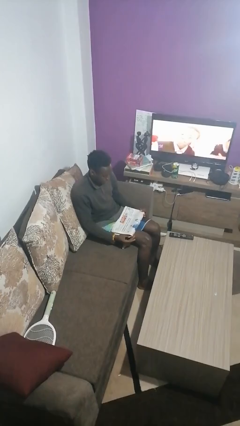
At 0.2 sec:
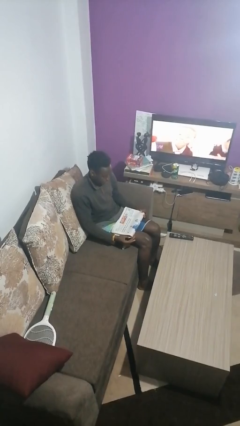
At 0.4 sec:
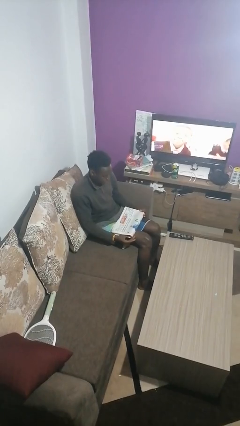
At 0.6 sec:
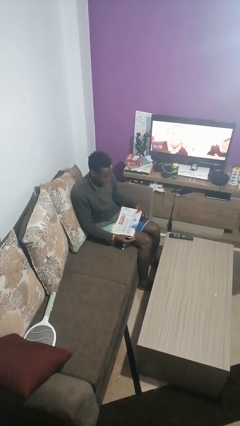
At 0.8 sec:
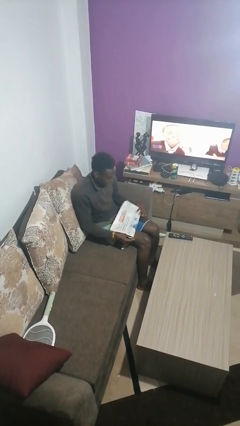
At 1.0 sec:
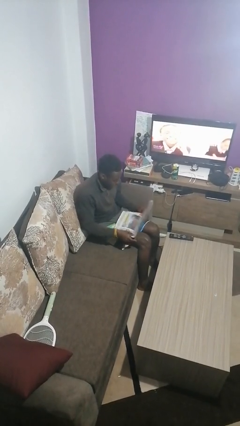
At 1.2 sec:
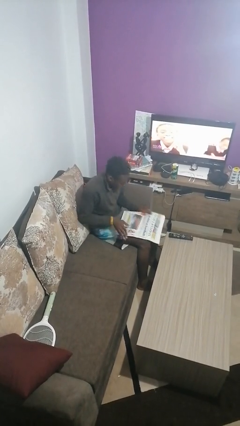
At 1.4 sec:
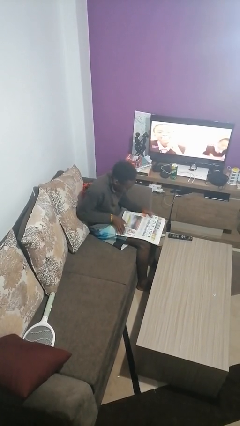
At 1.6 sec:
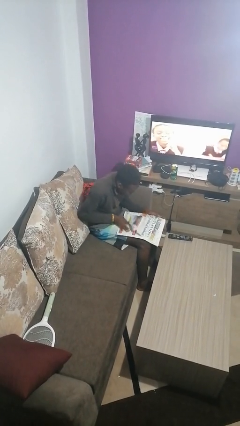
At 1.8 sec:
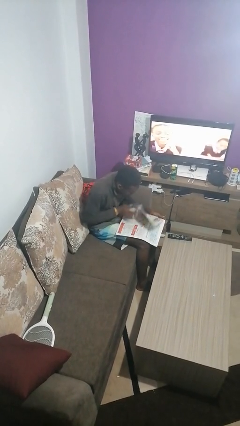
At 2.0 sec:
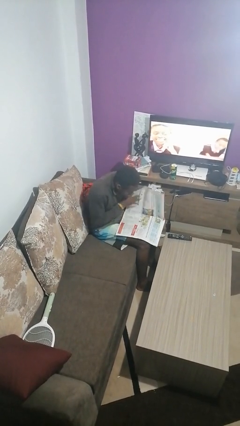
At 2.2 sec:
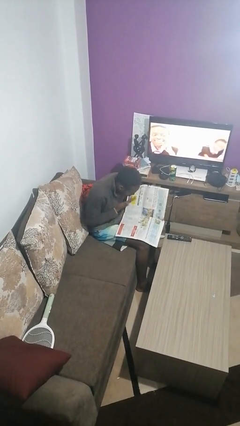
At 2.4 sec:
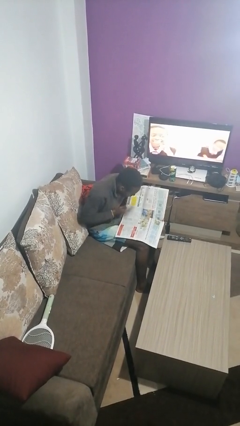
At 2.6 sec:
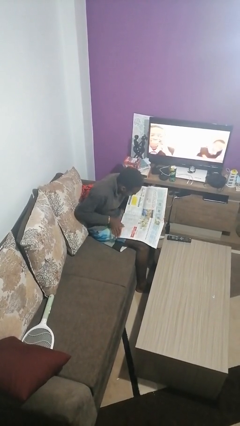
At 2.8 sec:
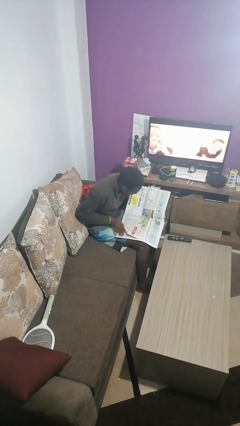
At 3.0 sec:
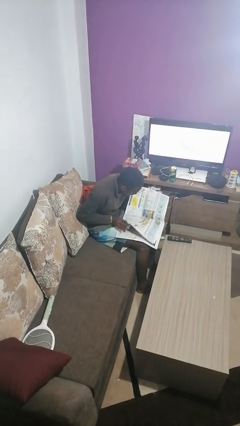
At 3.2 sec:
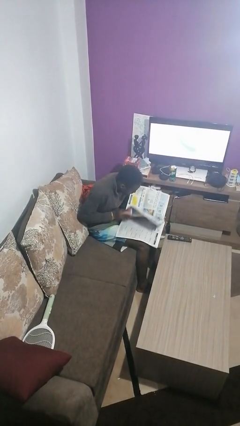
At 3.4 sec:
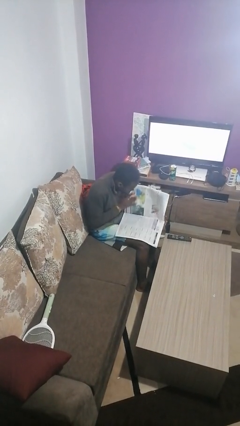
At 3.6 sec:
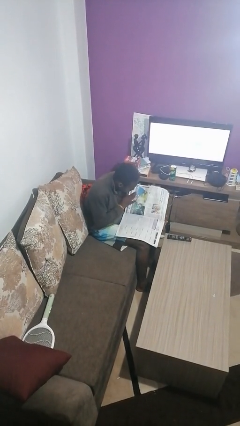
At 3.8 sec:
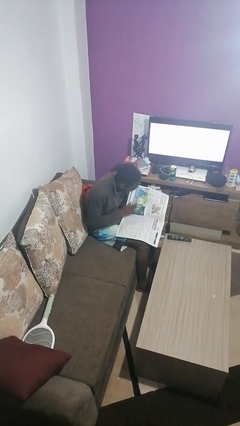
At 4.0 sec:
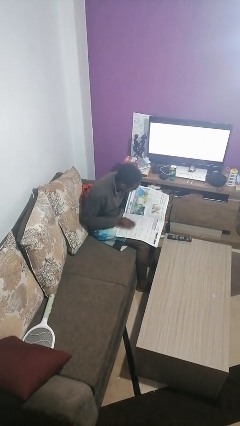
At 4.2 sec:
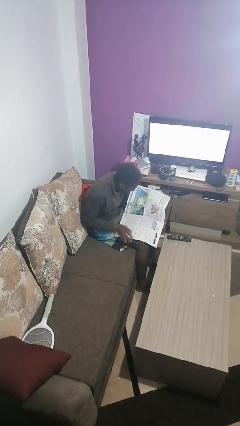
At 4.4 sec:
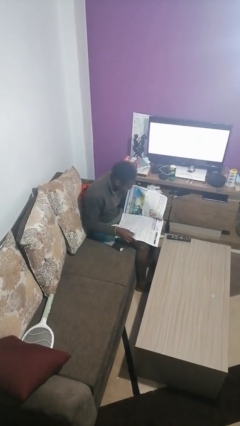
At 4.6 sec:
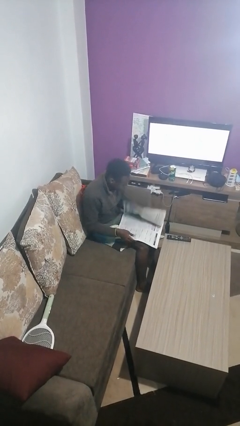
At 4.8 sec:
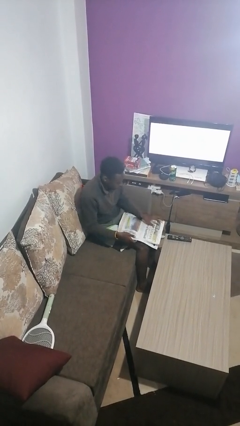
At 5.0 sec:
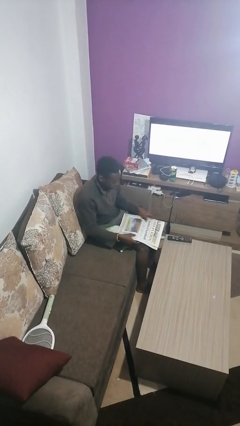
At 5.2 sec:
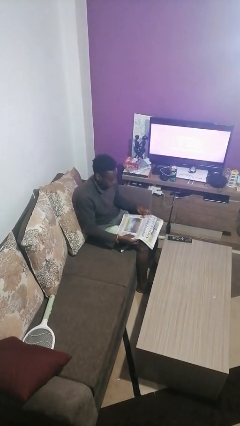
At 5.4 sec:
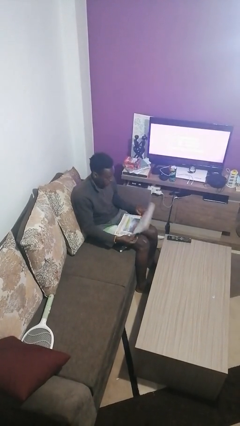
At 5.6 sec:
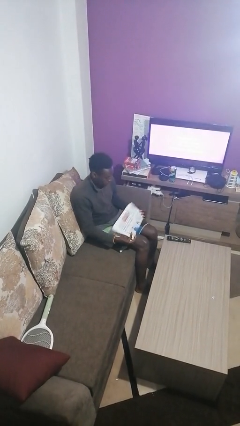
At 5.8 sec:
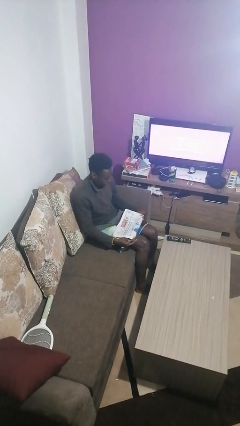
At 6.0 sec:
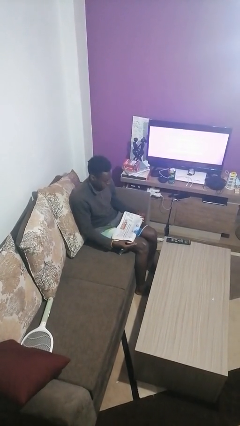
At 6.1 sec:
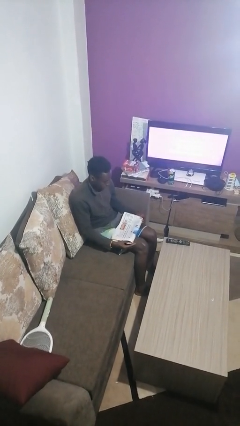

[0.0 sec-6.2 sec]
person reads newspaper

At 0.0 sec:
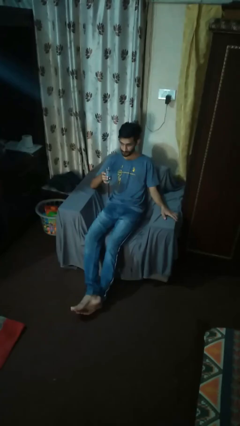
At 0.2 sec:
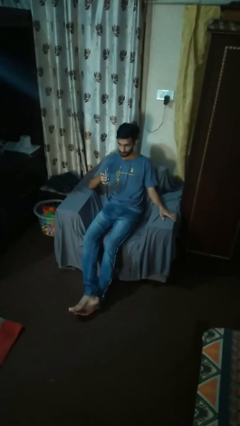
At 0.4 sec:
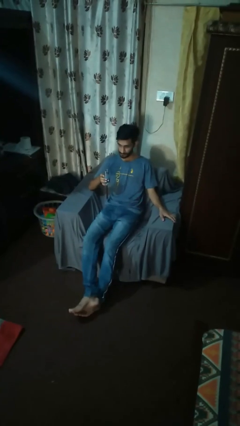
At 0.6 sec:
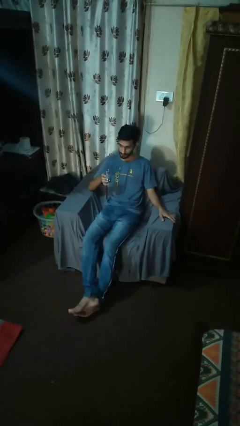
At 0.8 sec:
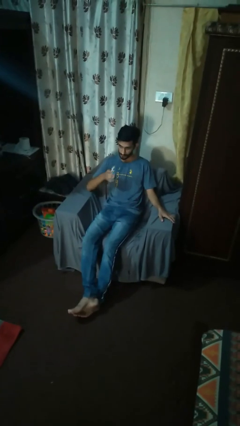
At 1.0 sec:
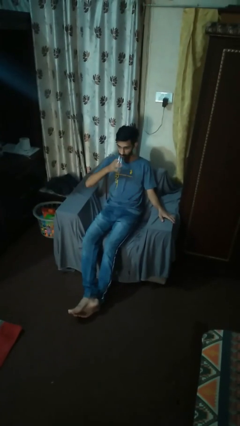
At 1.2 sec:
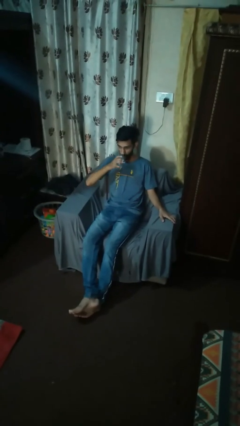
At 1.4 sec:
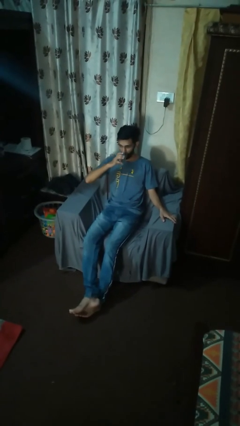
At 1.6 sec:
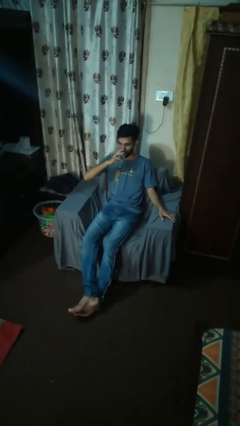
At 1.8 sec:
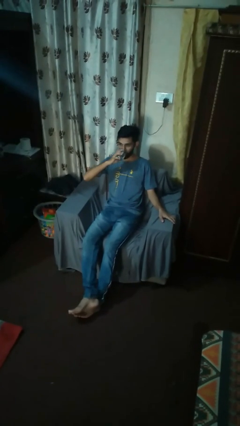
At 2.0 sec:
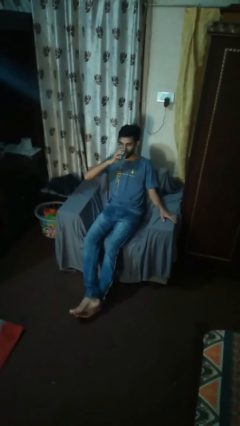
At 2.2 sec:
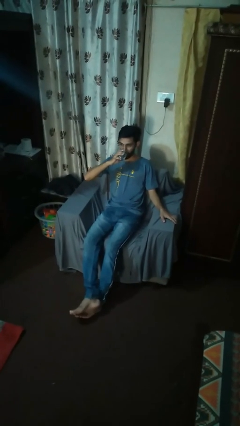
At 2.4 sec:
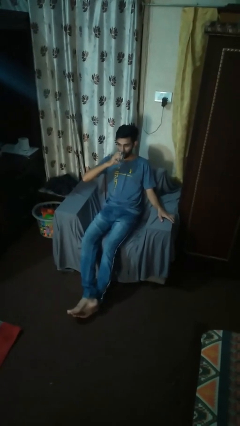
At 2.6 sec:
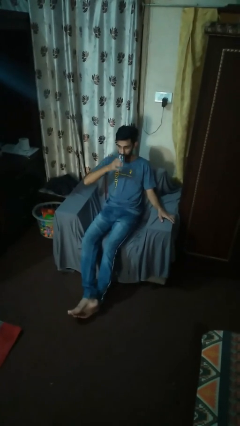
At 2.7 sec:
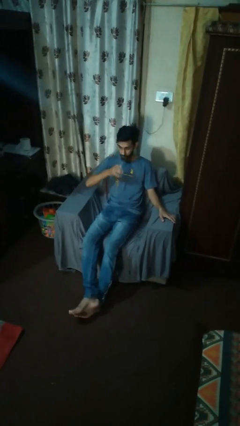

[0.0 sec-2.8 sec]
person drinks from shotglass

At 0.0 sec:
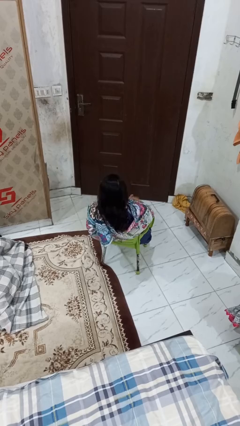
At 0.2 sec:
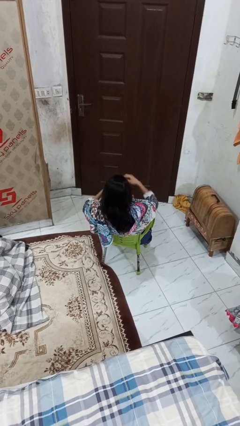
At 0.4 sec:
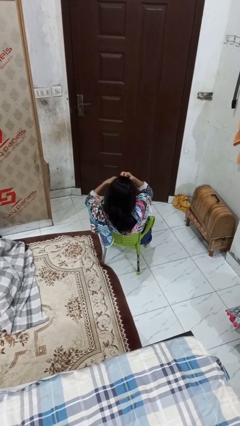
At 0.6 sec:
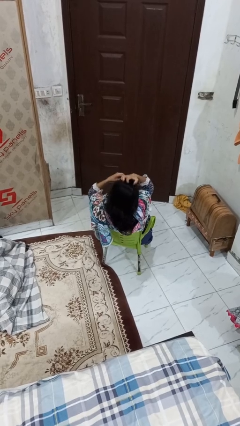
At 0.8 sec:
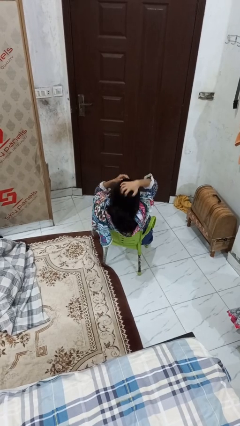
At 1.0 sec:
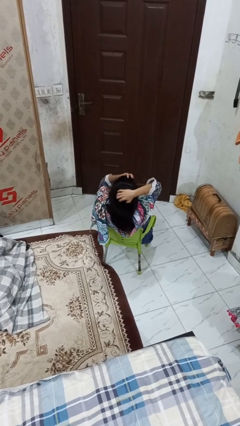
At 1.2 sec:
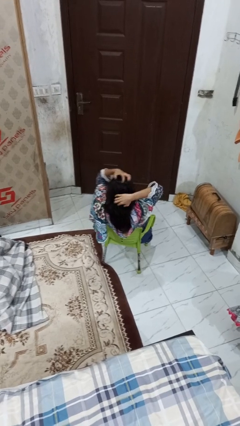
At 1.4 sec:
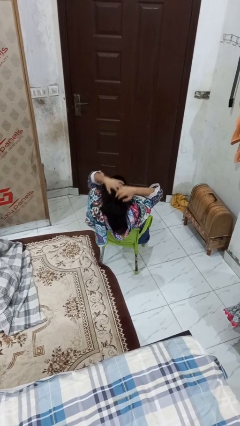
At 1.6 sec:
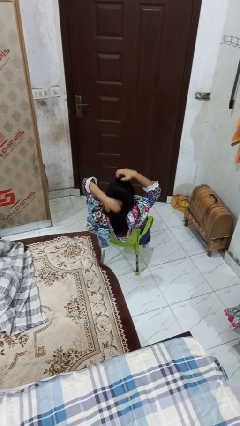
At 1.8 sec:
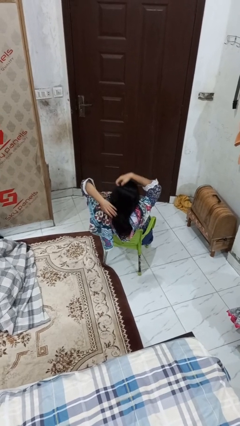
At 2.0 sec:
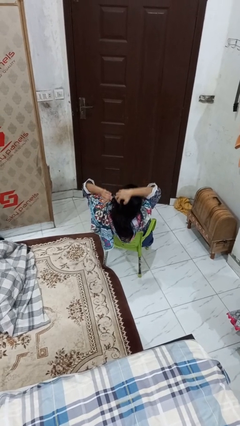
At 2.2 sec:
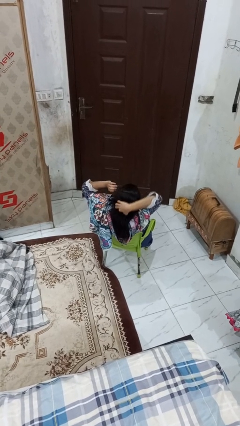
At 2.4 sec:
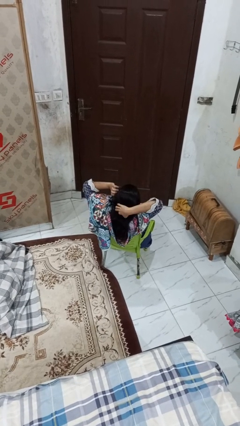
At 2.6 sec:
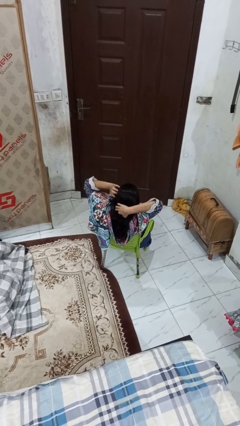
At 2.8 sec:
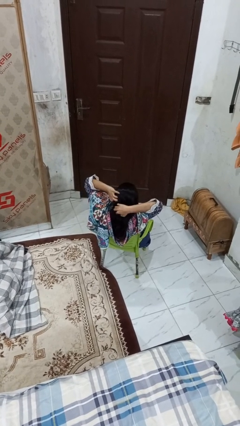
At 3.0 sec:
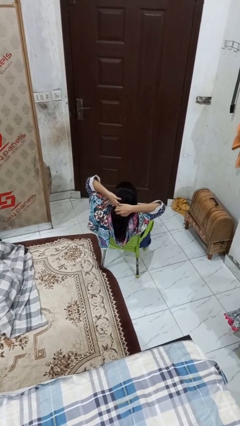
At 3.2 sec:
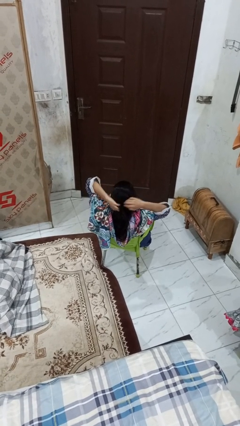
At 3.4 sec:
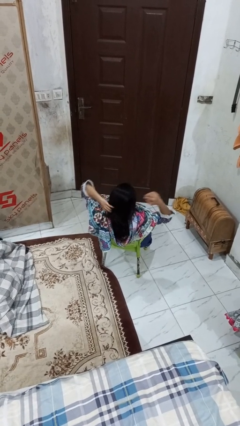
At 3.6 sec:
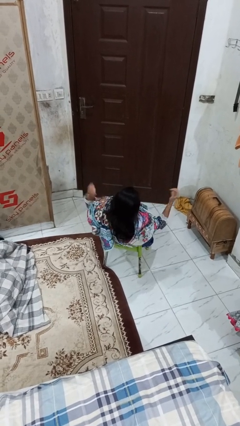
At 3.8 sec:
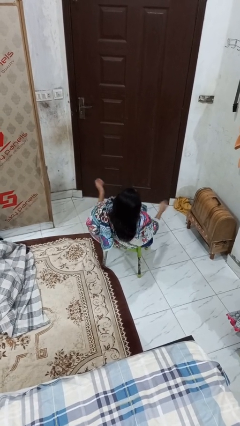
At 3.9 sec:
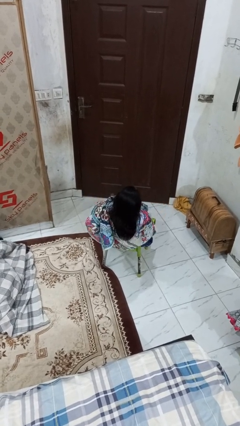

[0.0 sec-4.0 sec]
person strokes hair

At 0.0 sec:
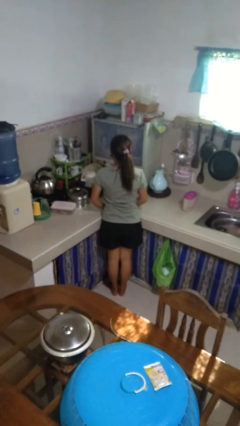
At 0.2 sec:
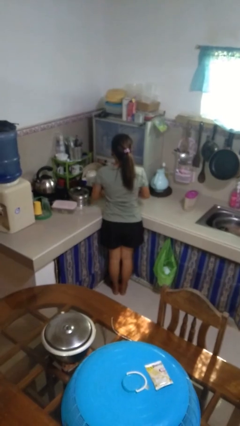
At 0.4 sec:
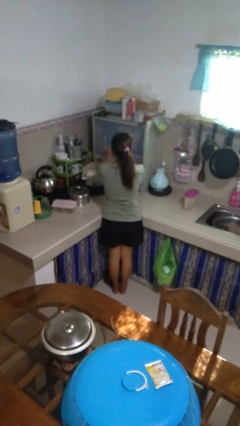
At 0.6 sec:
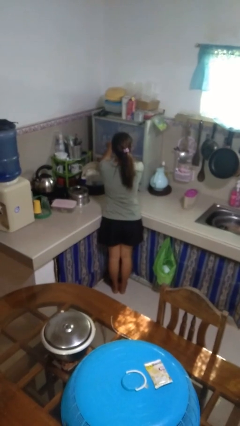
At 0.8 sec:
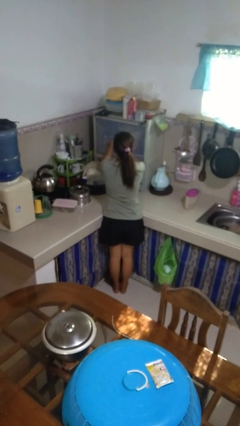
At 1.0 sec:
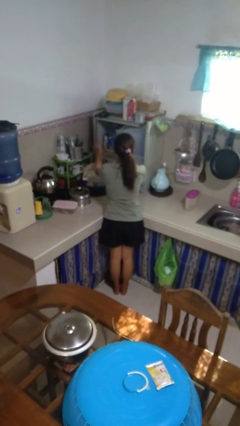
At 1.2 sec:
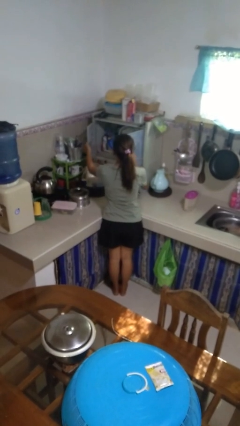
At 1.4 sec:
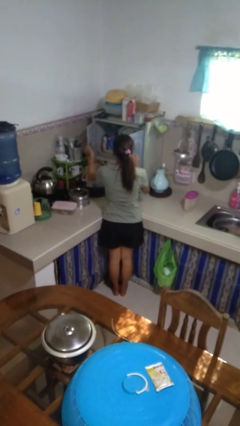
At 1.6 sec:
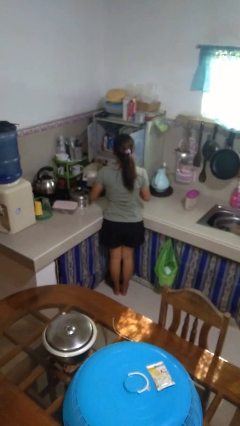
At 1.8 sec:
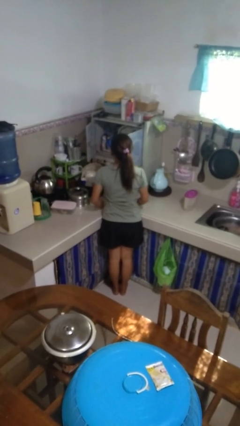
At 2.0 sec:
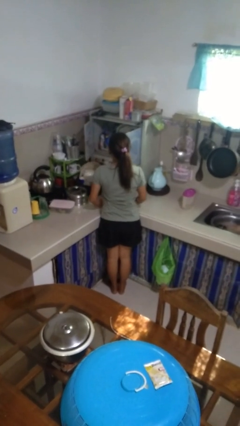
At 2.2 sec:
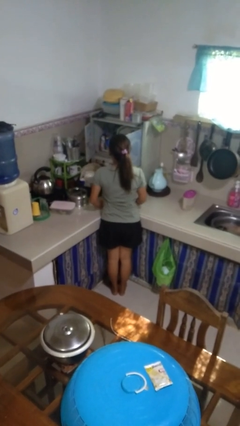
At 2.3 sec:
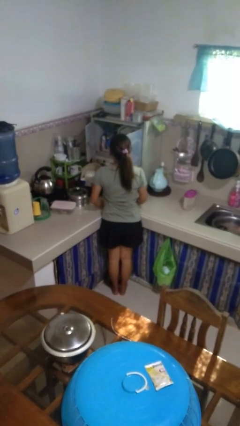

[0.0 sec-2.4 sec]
person opens kitchen drawer

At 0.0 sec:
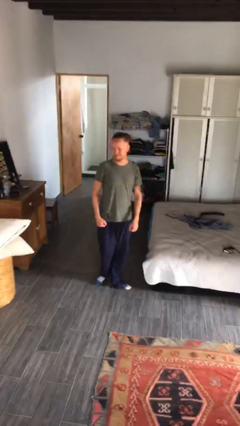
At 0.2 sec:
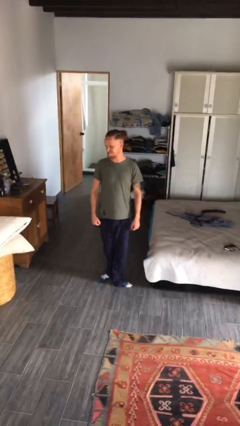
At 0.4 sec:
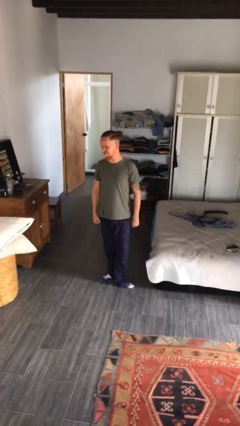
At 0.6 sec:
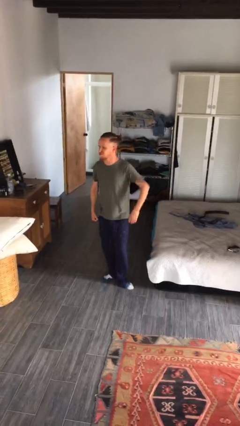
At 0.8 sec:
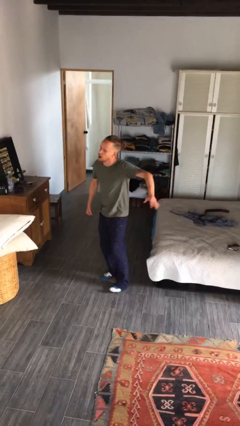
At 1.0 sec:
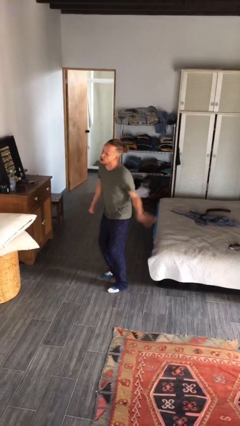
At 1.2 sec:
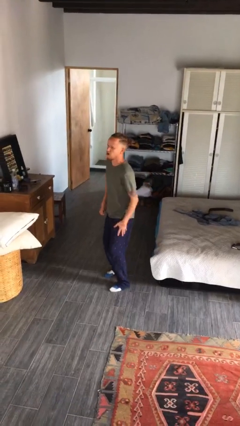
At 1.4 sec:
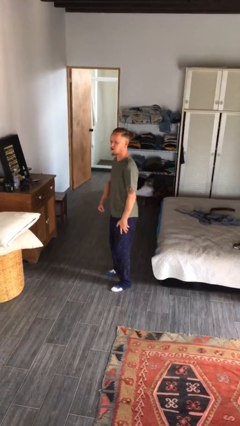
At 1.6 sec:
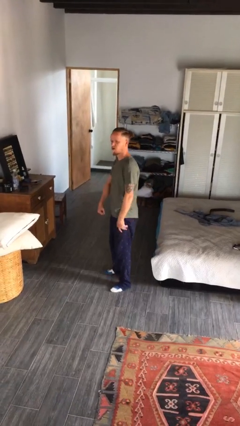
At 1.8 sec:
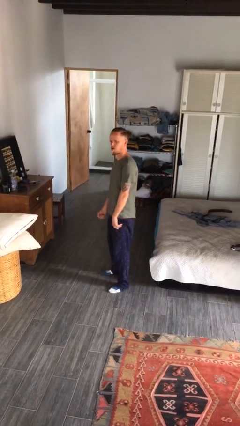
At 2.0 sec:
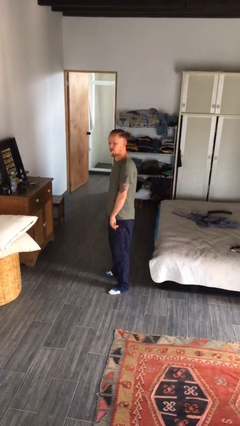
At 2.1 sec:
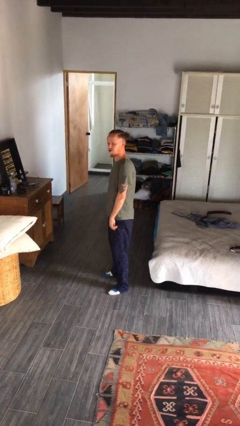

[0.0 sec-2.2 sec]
person slaps hands on thighs
